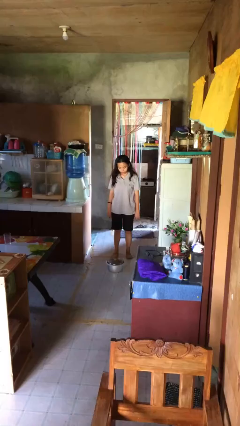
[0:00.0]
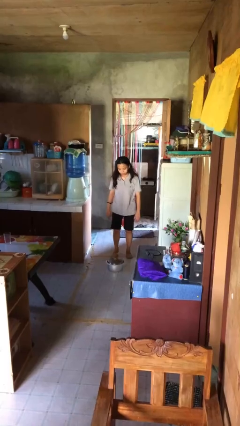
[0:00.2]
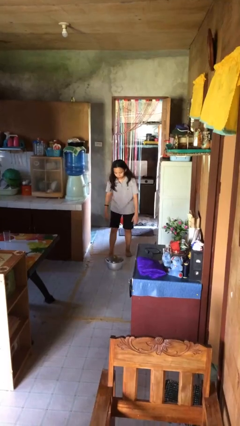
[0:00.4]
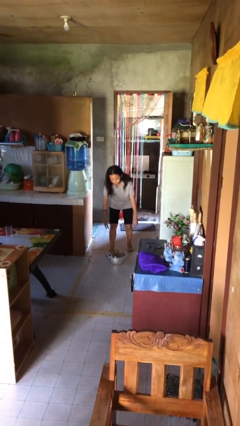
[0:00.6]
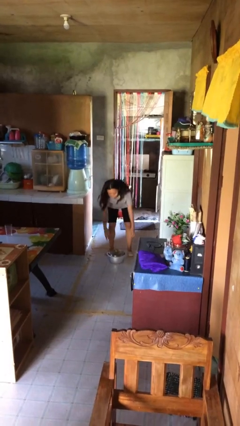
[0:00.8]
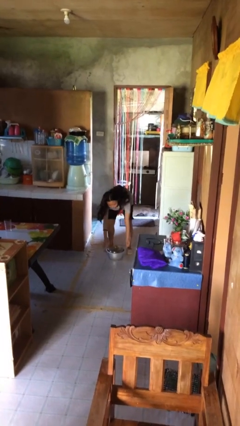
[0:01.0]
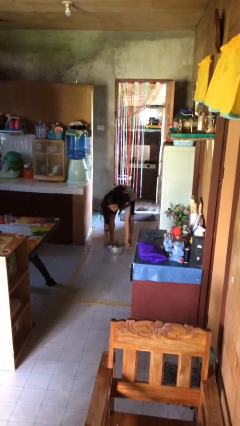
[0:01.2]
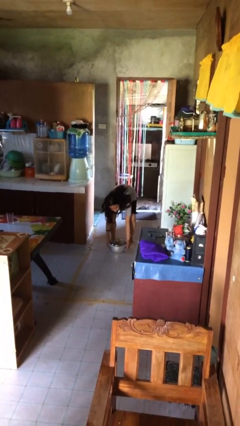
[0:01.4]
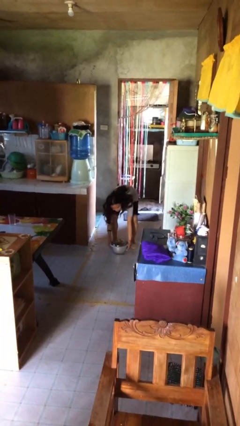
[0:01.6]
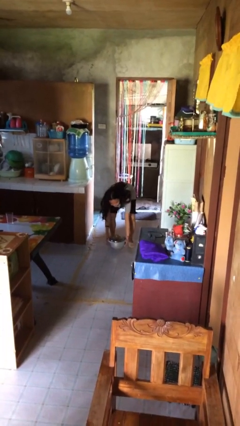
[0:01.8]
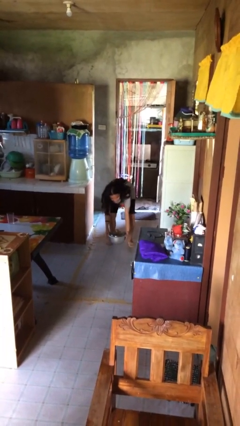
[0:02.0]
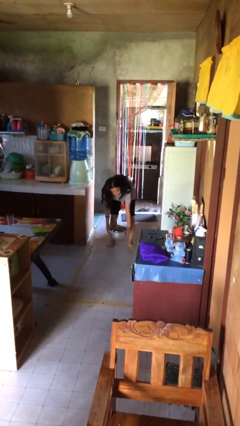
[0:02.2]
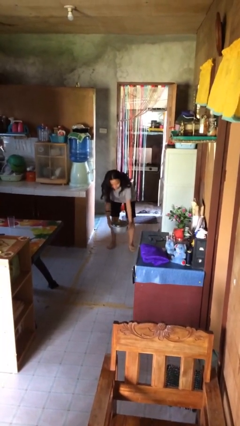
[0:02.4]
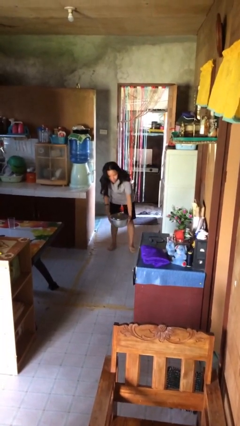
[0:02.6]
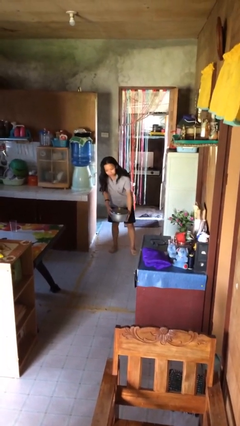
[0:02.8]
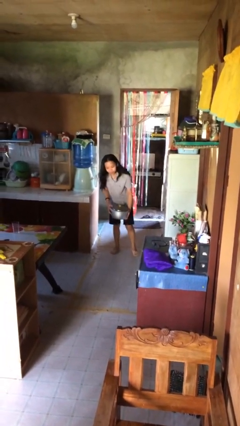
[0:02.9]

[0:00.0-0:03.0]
person picks up object from floor

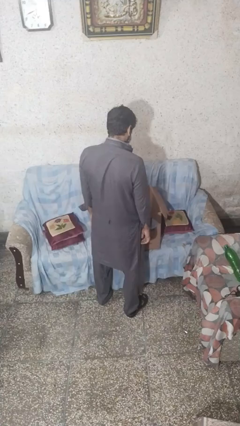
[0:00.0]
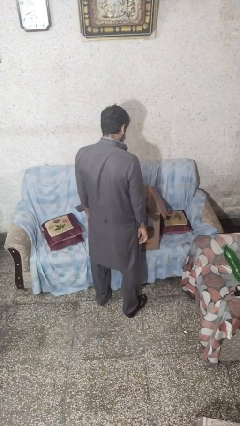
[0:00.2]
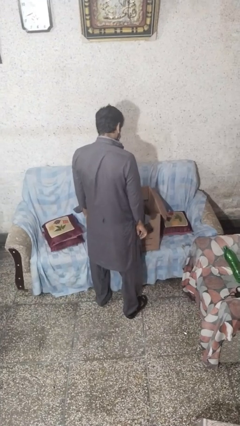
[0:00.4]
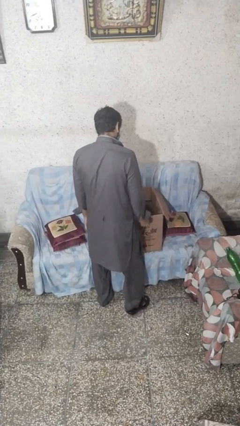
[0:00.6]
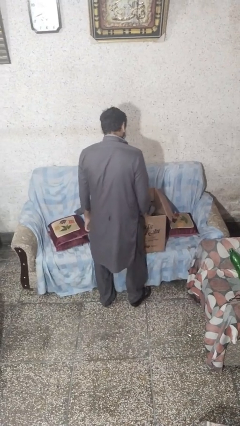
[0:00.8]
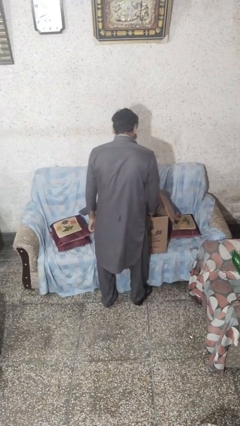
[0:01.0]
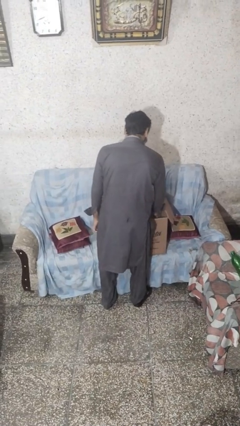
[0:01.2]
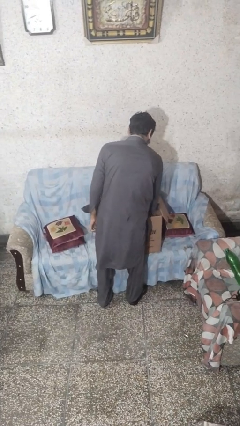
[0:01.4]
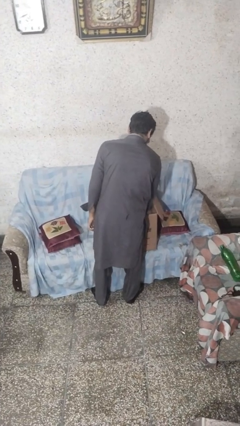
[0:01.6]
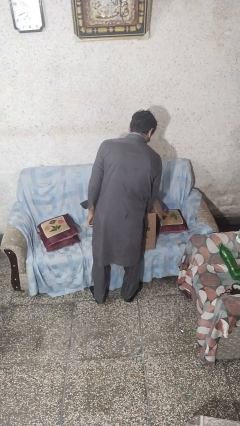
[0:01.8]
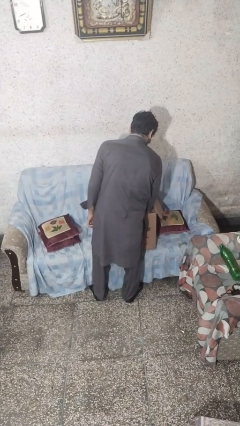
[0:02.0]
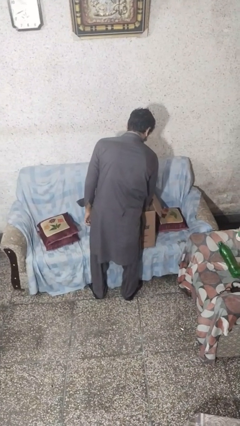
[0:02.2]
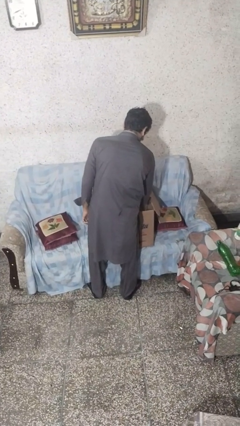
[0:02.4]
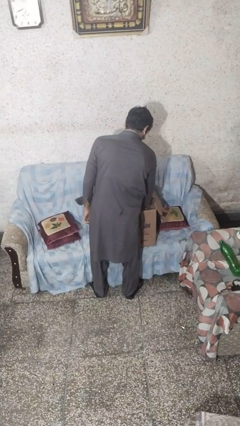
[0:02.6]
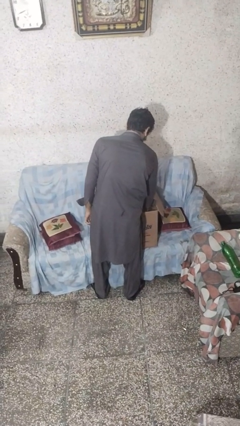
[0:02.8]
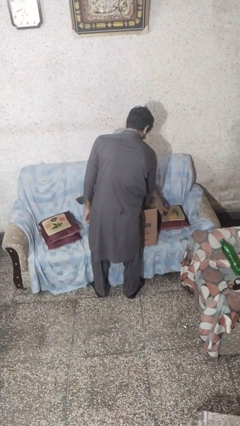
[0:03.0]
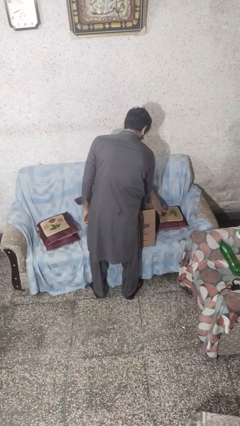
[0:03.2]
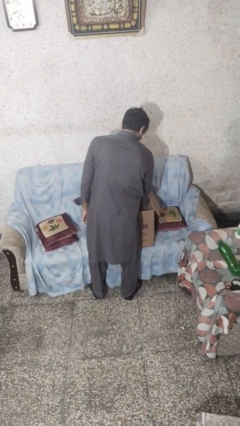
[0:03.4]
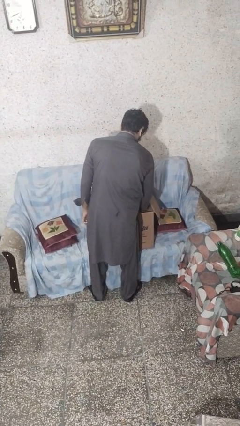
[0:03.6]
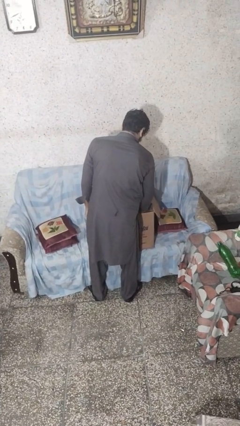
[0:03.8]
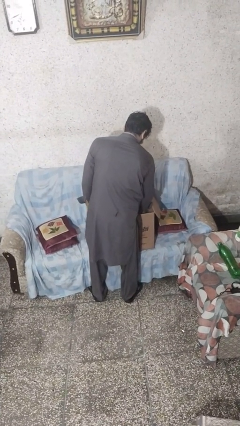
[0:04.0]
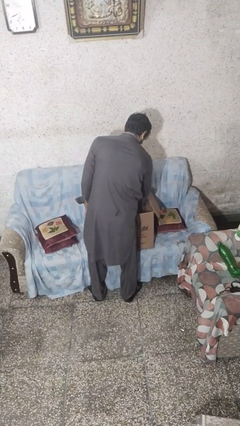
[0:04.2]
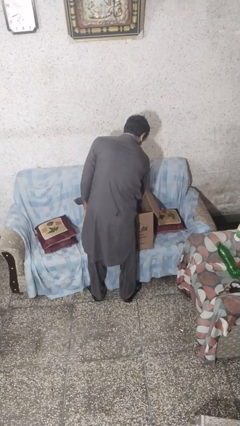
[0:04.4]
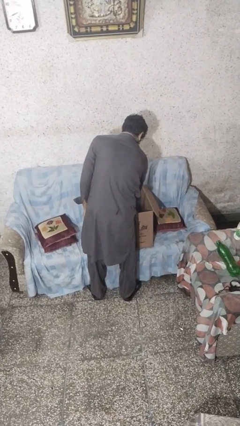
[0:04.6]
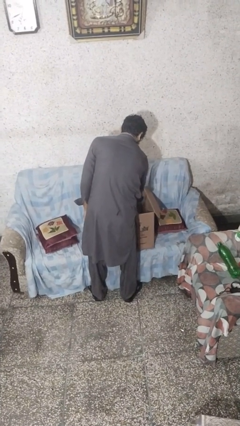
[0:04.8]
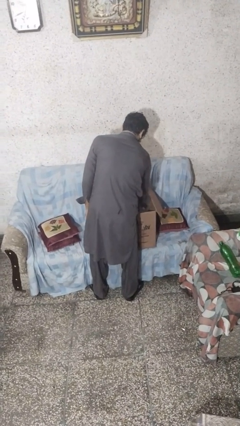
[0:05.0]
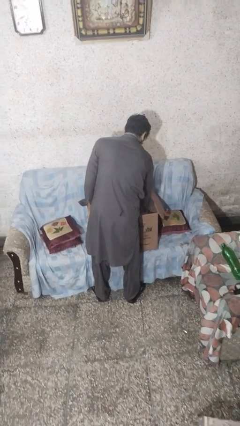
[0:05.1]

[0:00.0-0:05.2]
person searches in box

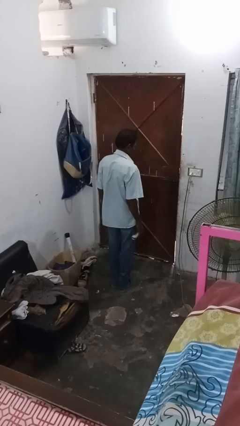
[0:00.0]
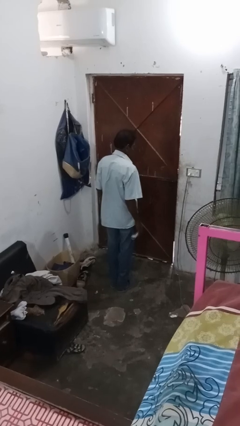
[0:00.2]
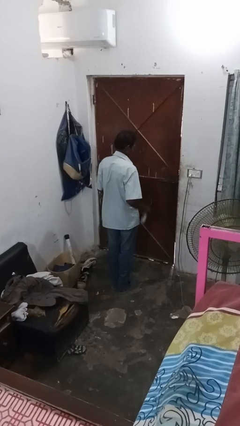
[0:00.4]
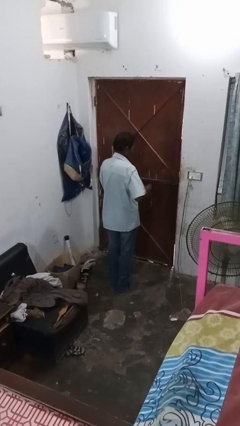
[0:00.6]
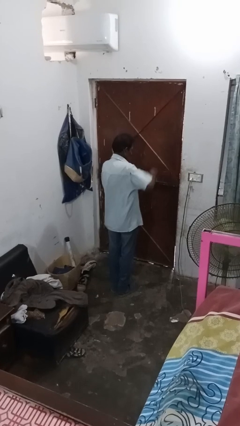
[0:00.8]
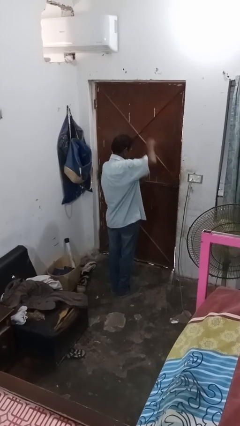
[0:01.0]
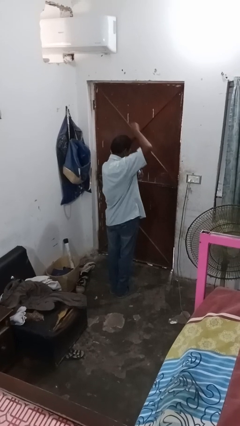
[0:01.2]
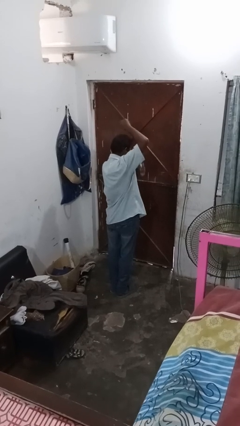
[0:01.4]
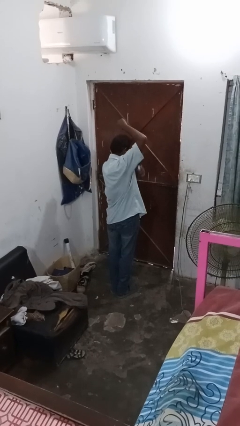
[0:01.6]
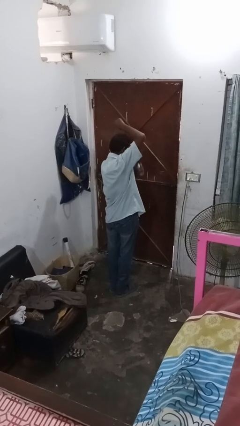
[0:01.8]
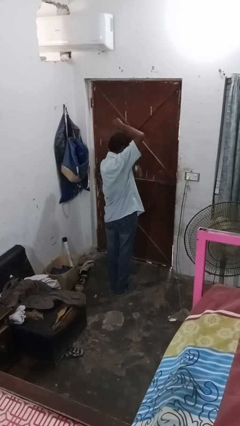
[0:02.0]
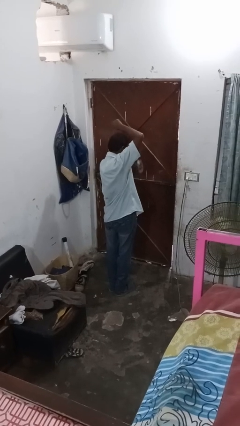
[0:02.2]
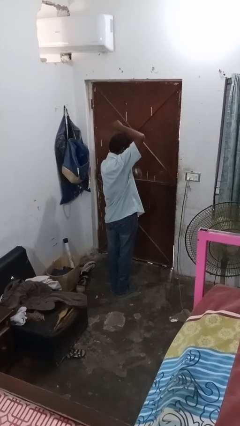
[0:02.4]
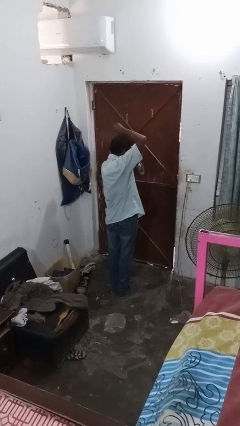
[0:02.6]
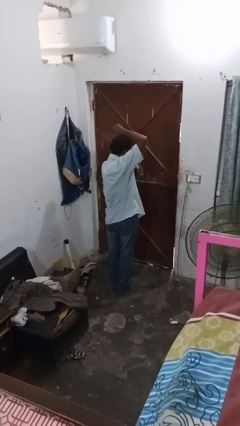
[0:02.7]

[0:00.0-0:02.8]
person applies deodorant

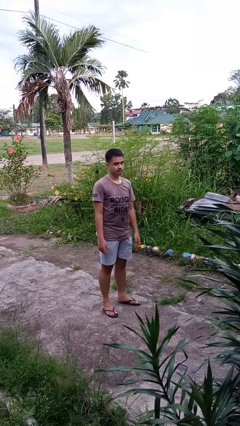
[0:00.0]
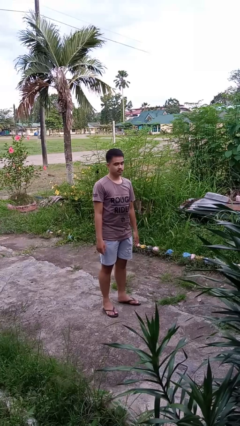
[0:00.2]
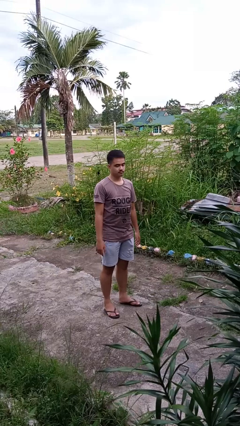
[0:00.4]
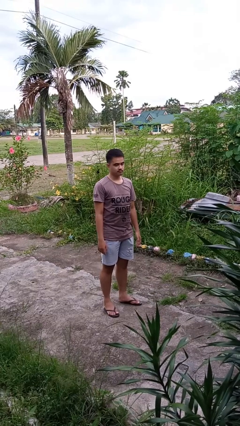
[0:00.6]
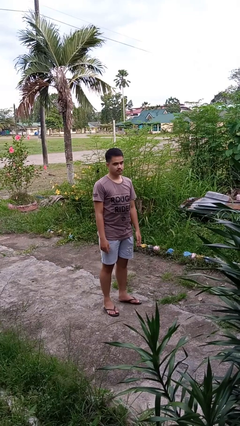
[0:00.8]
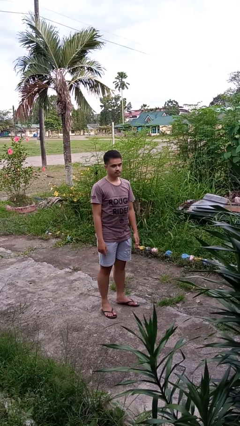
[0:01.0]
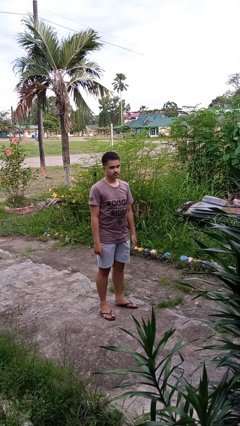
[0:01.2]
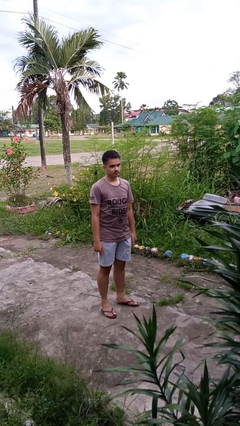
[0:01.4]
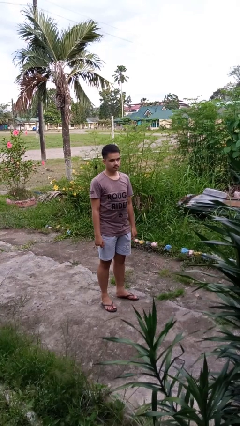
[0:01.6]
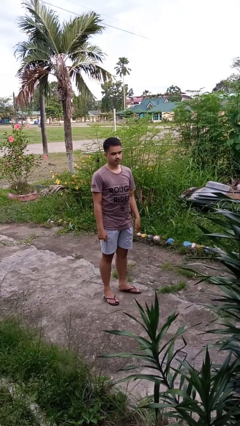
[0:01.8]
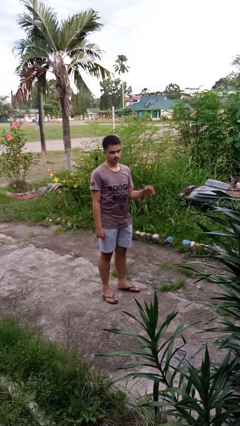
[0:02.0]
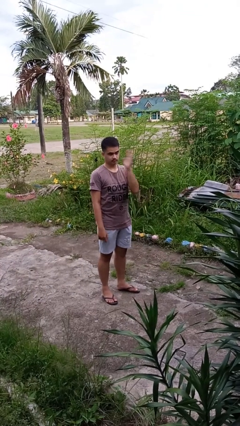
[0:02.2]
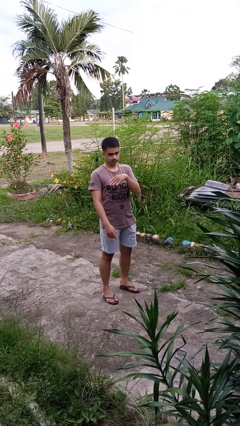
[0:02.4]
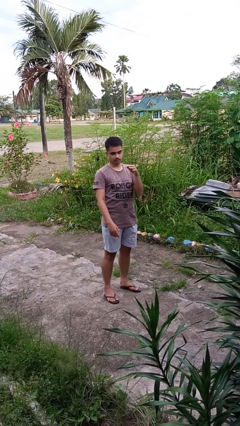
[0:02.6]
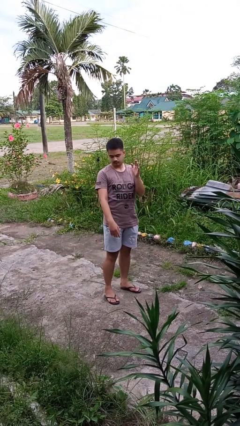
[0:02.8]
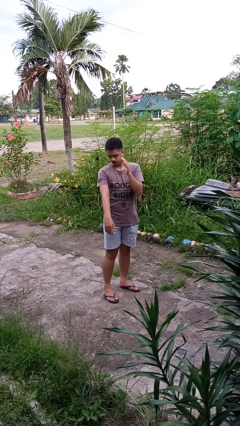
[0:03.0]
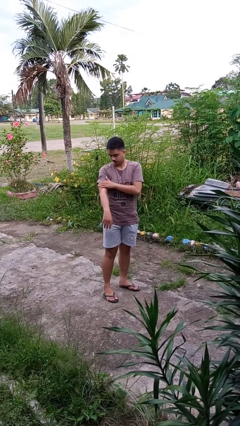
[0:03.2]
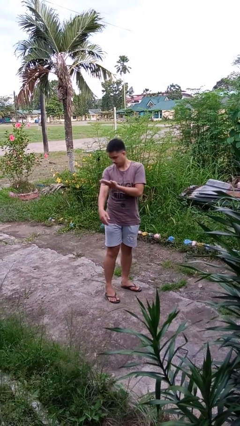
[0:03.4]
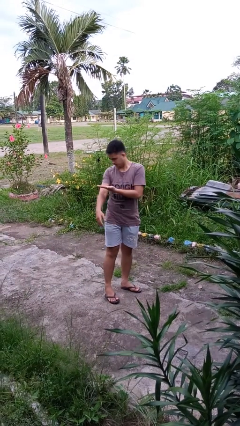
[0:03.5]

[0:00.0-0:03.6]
person swats bug

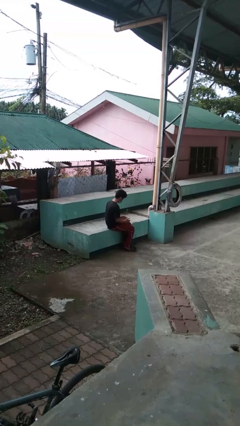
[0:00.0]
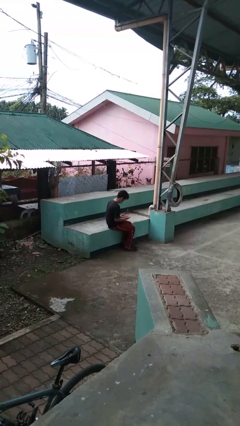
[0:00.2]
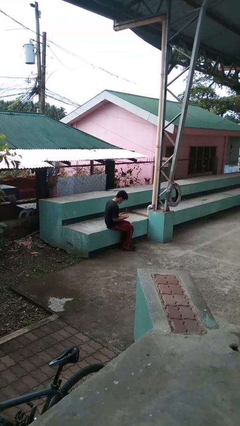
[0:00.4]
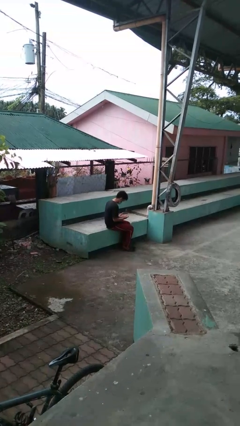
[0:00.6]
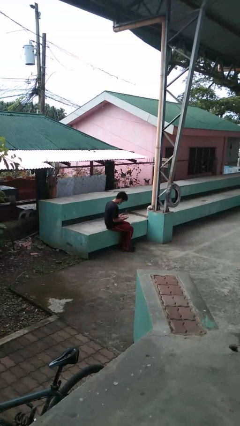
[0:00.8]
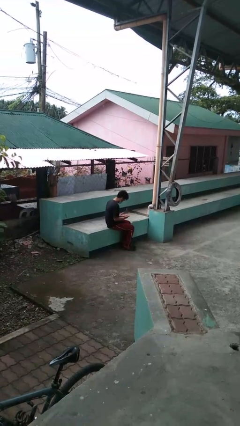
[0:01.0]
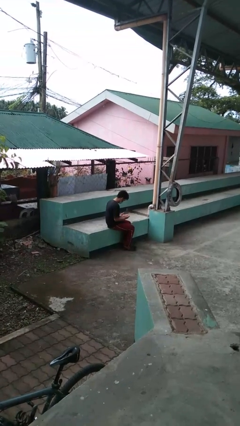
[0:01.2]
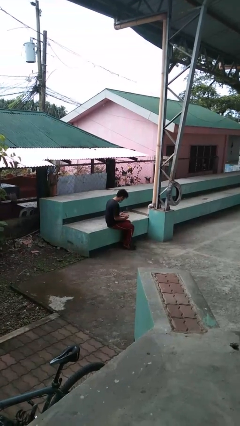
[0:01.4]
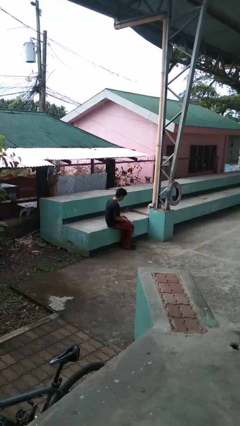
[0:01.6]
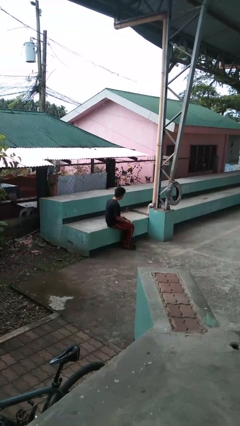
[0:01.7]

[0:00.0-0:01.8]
person looks at hands in lap

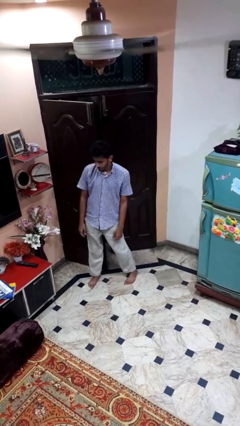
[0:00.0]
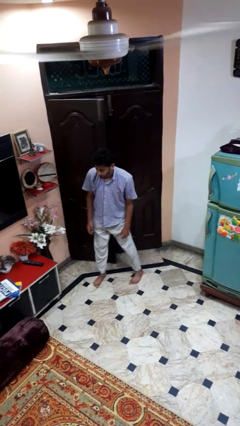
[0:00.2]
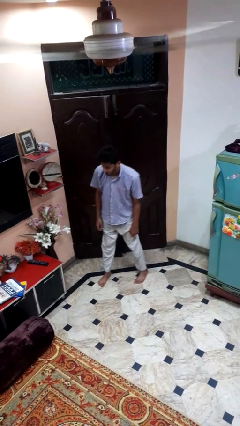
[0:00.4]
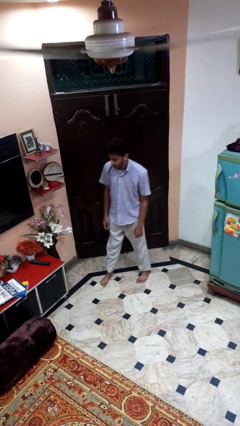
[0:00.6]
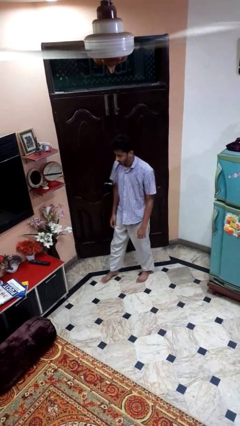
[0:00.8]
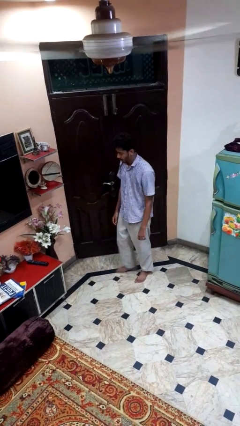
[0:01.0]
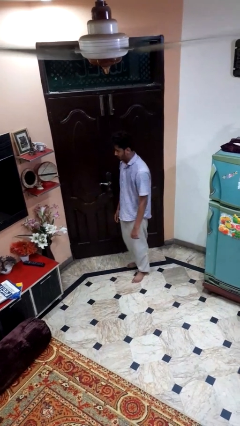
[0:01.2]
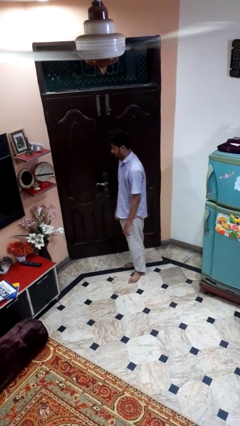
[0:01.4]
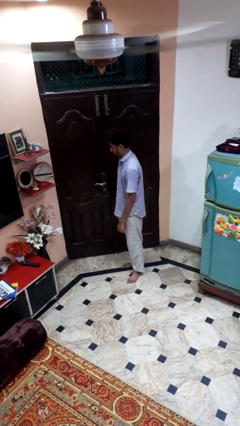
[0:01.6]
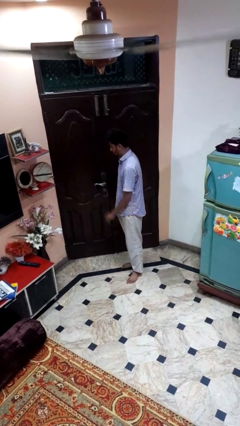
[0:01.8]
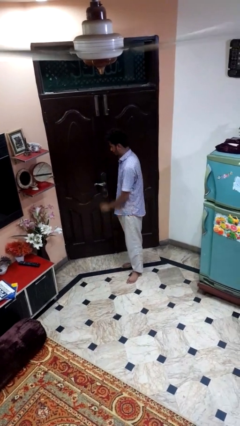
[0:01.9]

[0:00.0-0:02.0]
person closes door with hip
